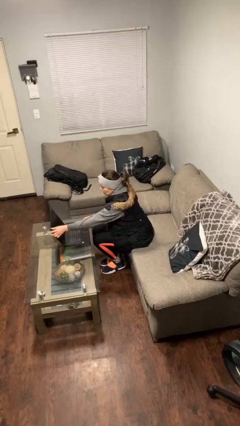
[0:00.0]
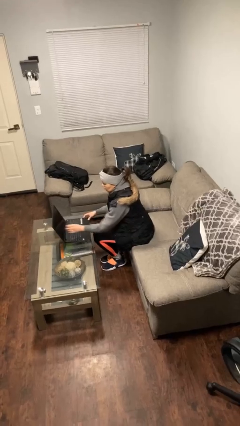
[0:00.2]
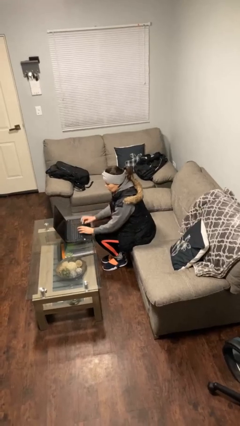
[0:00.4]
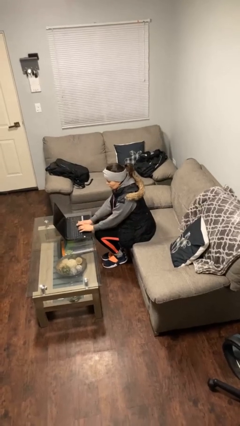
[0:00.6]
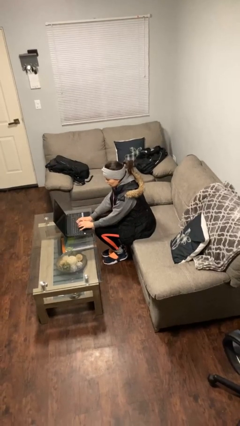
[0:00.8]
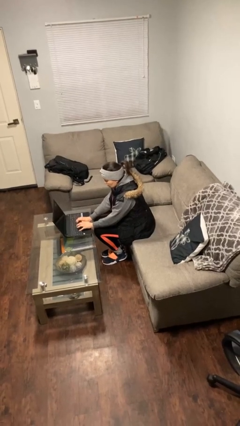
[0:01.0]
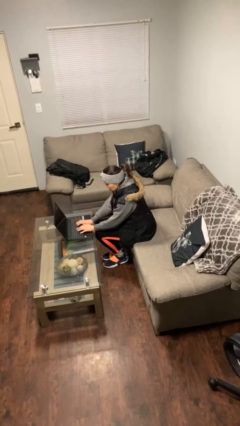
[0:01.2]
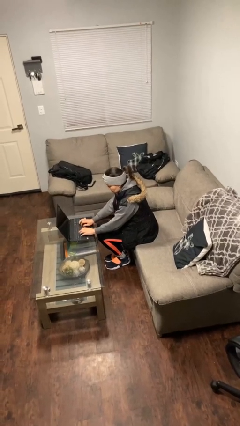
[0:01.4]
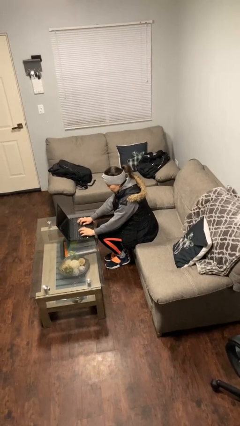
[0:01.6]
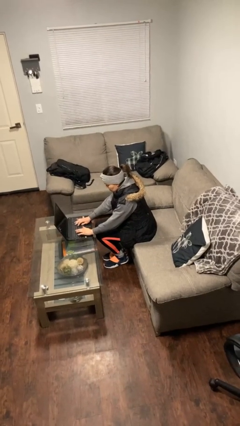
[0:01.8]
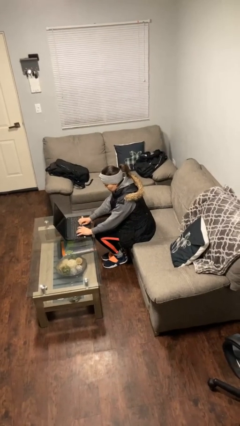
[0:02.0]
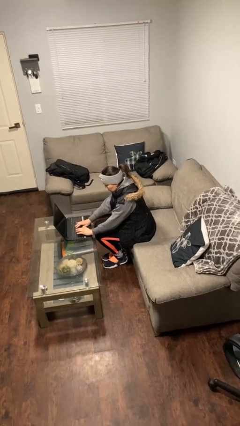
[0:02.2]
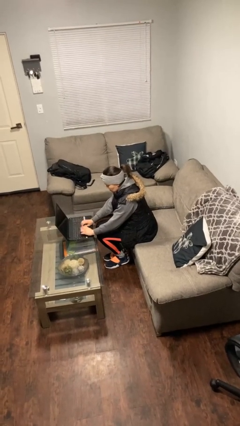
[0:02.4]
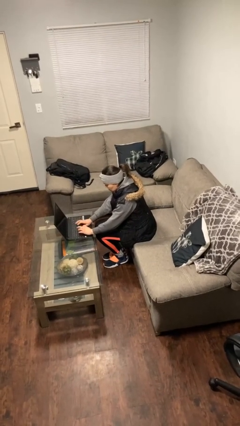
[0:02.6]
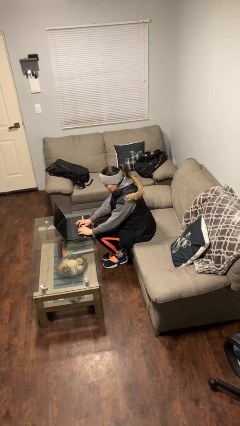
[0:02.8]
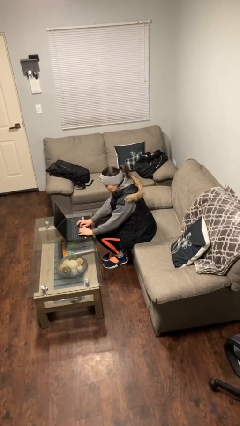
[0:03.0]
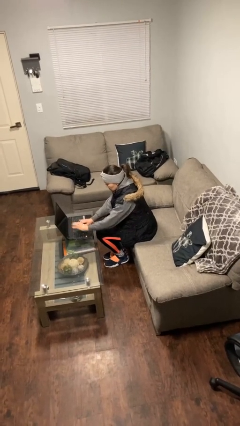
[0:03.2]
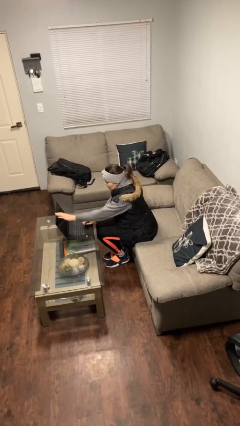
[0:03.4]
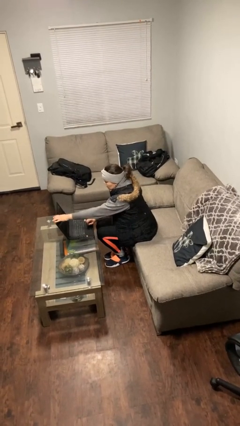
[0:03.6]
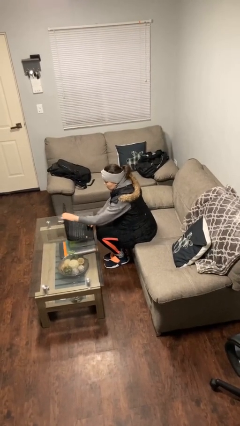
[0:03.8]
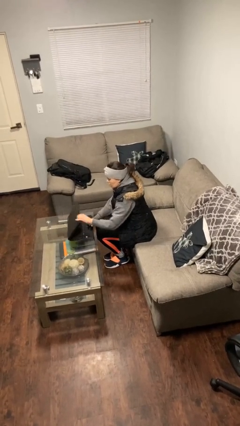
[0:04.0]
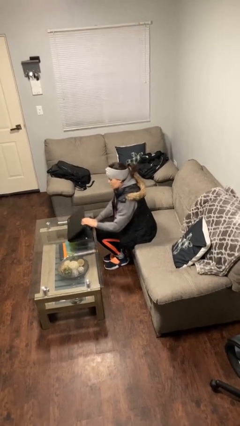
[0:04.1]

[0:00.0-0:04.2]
person interacts with laptop

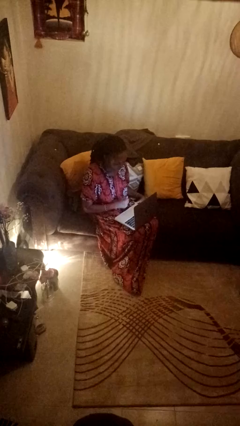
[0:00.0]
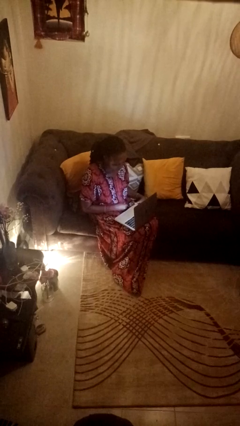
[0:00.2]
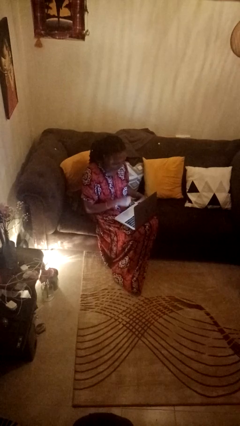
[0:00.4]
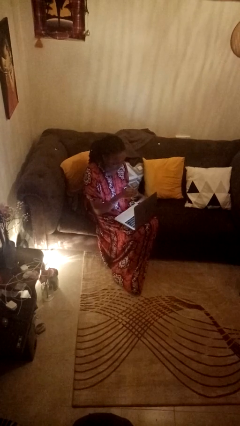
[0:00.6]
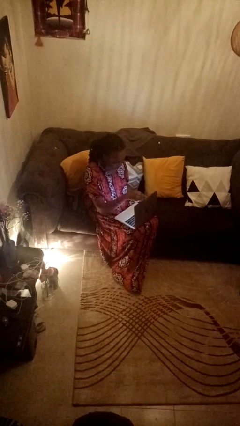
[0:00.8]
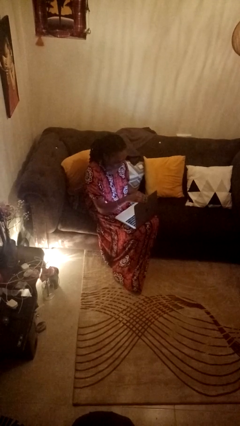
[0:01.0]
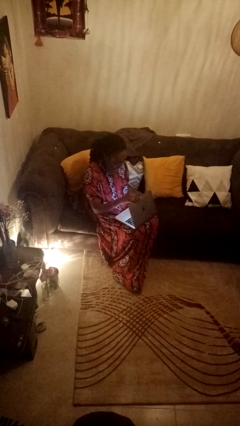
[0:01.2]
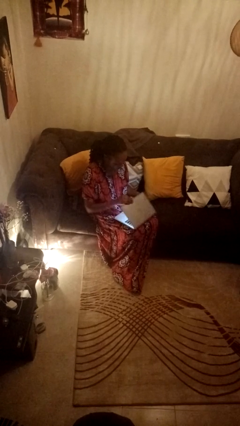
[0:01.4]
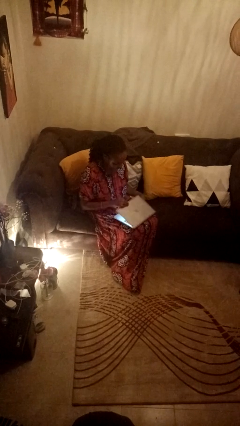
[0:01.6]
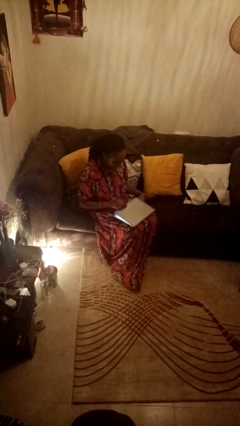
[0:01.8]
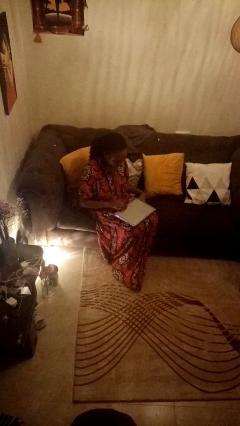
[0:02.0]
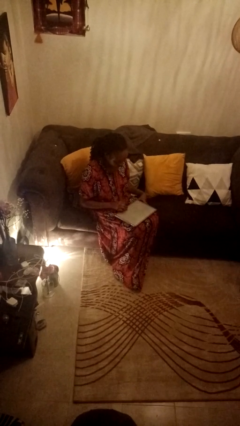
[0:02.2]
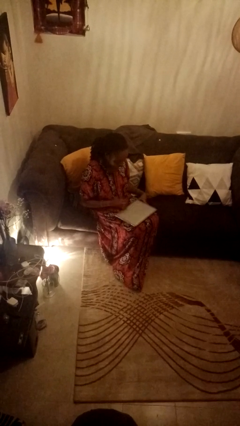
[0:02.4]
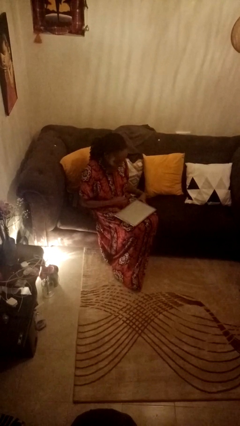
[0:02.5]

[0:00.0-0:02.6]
person closes laptop

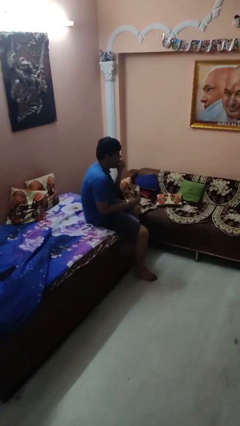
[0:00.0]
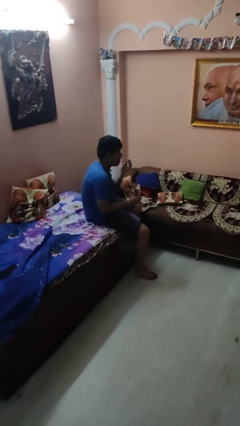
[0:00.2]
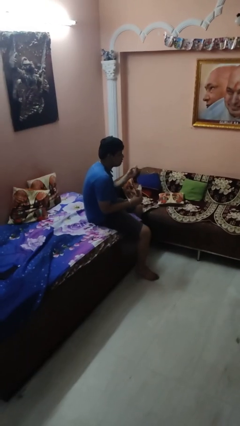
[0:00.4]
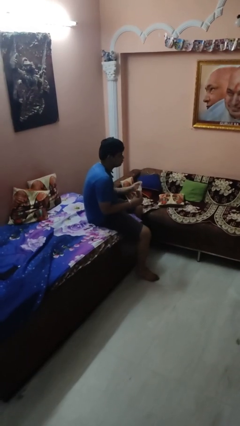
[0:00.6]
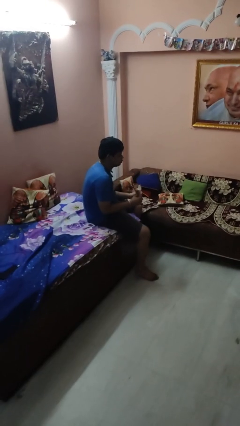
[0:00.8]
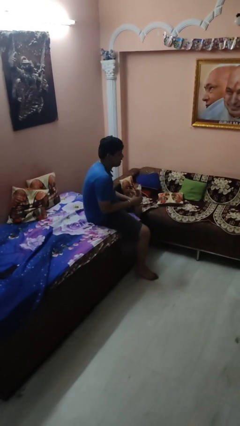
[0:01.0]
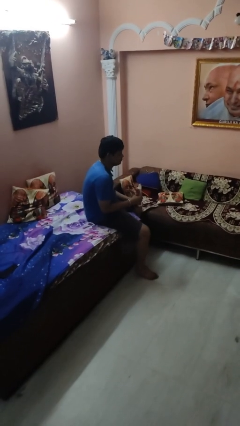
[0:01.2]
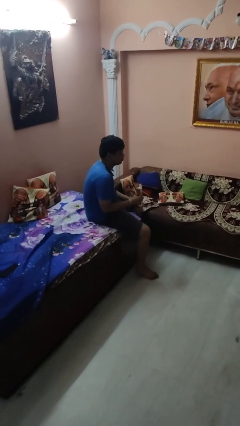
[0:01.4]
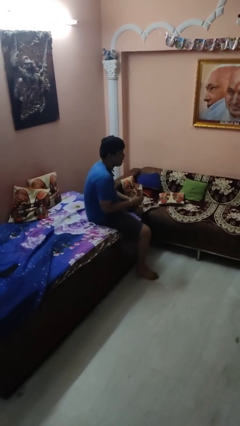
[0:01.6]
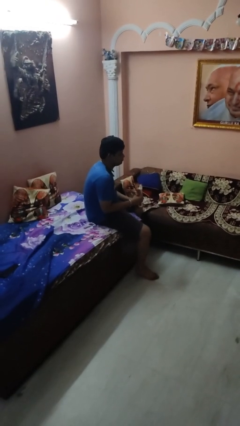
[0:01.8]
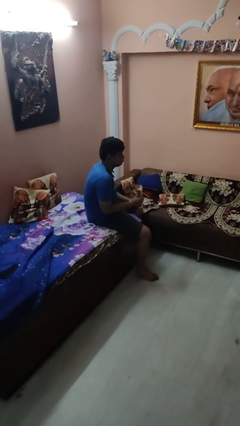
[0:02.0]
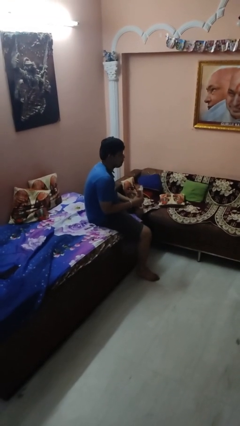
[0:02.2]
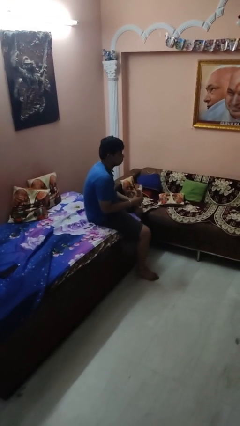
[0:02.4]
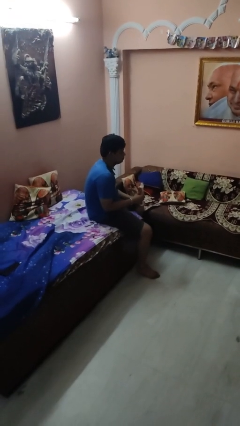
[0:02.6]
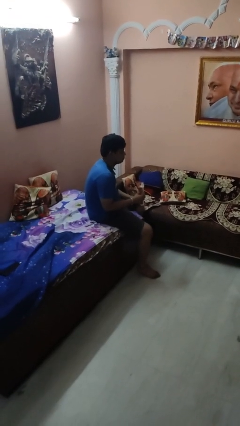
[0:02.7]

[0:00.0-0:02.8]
person eats snack from bag

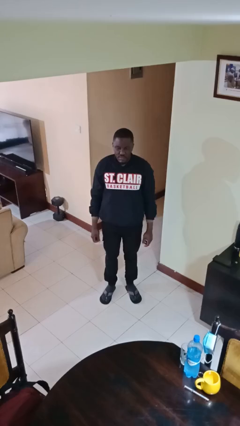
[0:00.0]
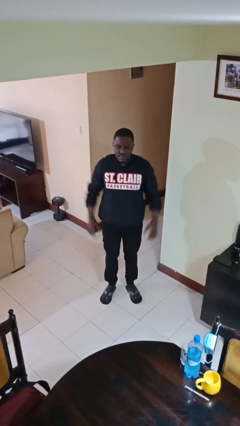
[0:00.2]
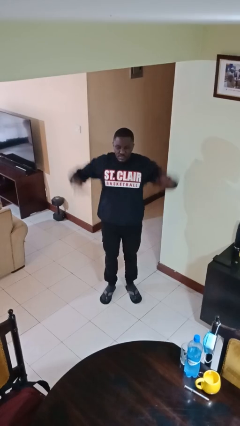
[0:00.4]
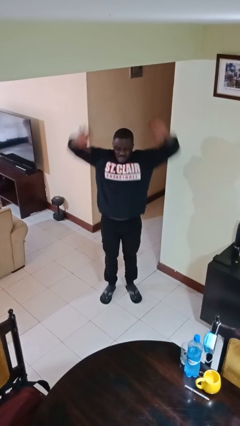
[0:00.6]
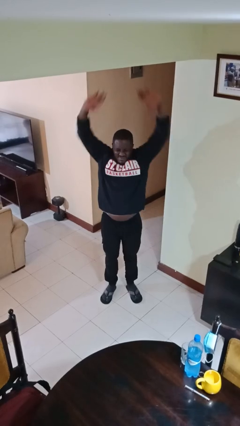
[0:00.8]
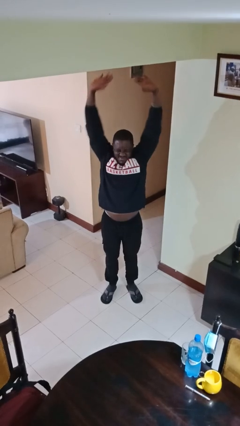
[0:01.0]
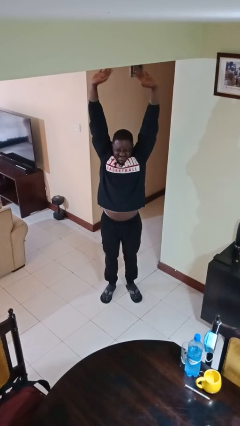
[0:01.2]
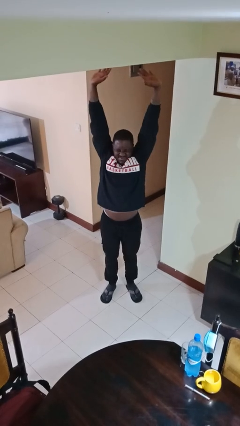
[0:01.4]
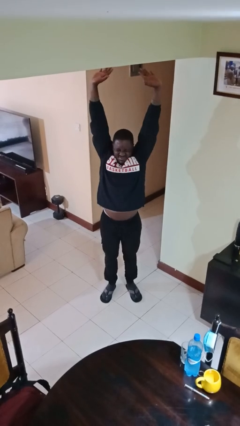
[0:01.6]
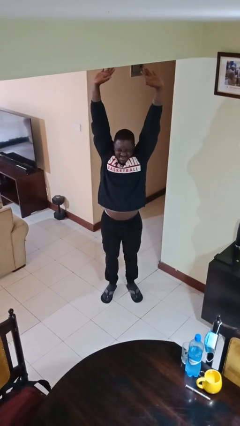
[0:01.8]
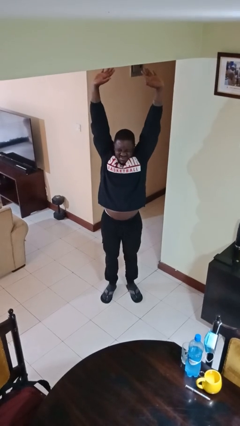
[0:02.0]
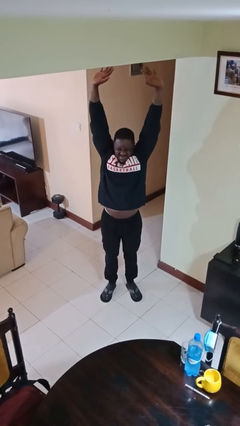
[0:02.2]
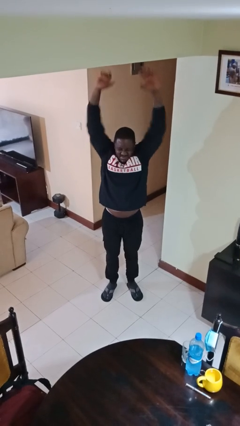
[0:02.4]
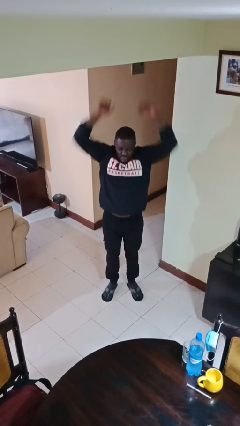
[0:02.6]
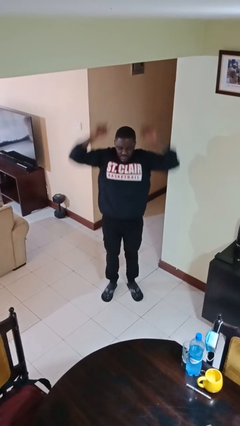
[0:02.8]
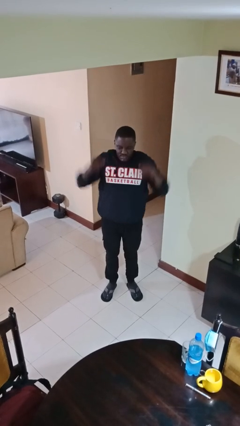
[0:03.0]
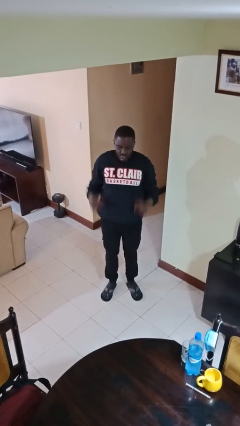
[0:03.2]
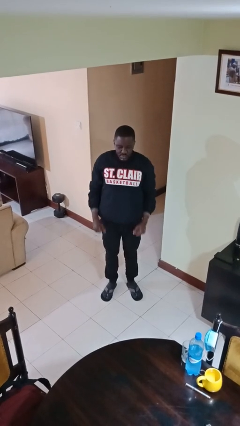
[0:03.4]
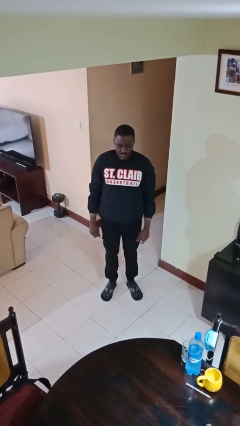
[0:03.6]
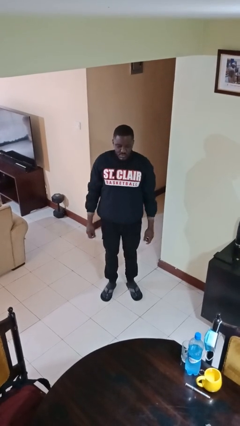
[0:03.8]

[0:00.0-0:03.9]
person stretches arms over head

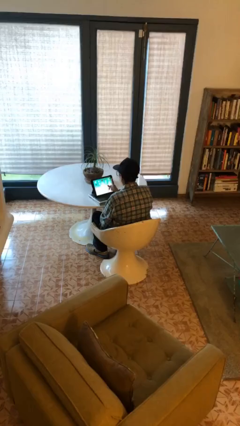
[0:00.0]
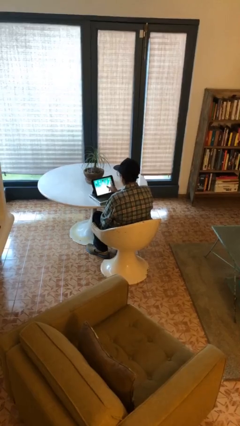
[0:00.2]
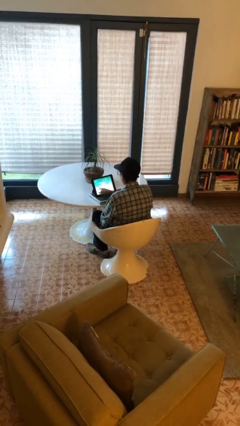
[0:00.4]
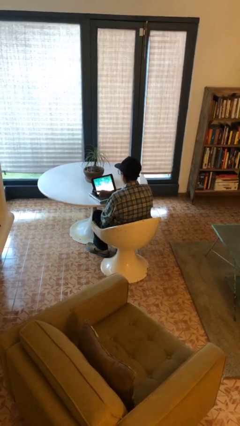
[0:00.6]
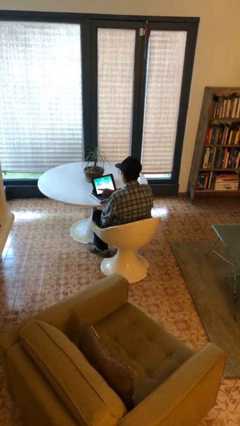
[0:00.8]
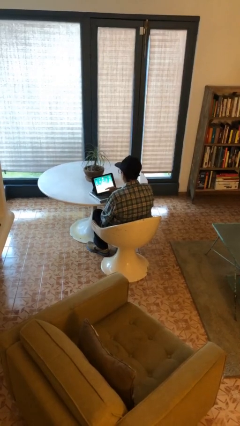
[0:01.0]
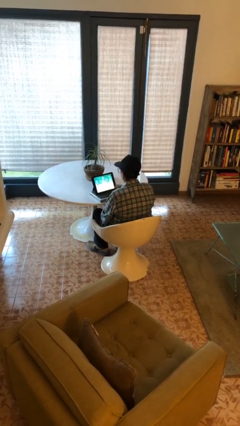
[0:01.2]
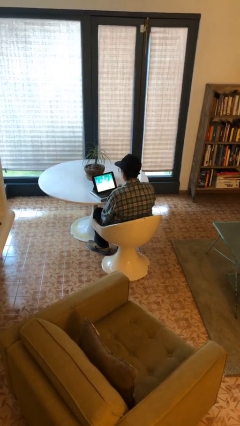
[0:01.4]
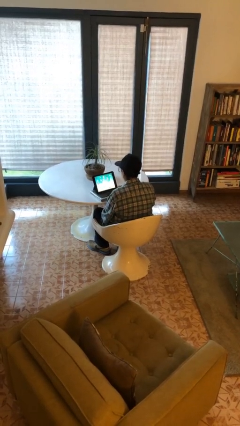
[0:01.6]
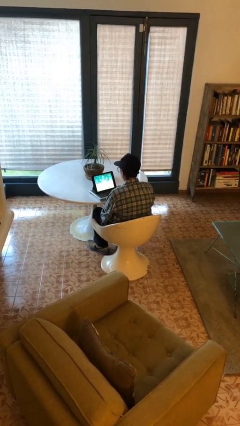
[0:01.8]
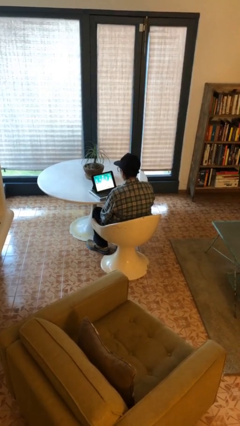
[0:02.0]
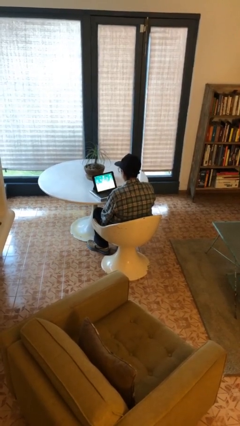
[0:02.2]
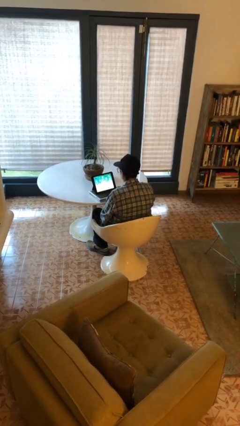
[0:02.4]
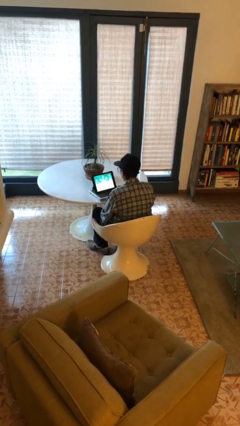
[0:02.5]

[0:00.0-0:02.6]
person interacts with tablet

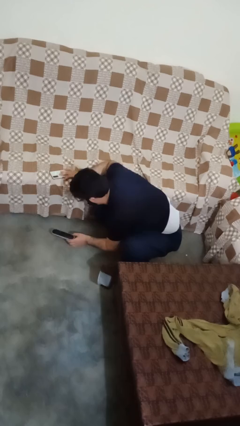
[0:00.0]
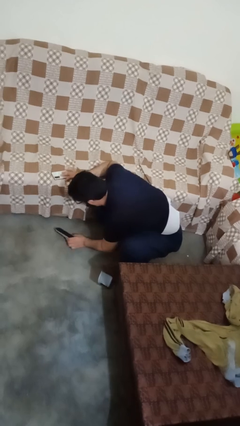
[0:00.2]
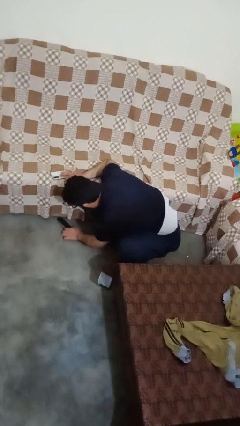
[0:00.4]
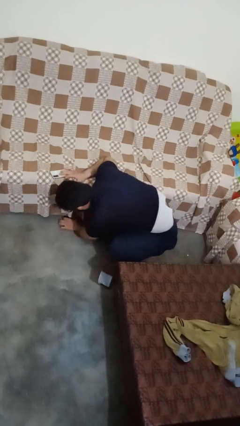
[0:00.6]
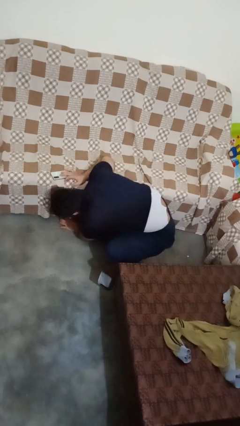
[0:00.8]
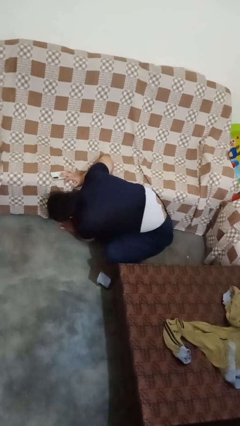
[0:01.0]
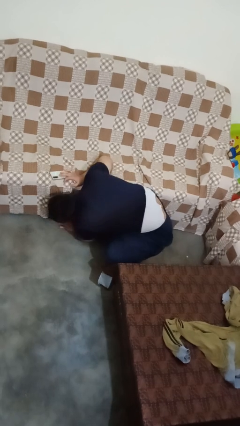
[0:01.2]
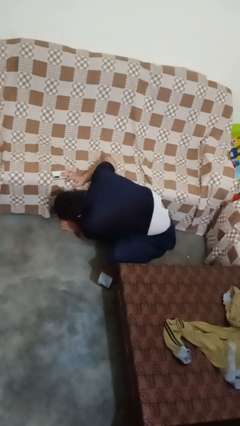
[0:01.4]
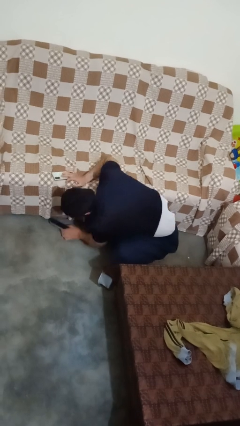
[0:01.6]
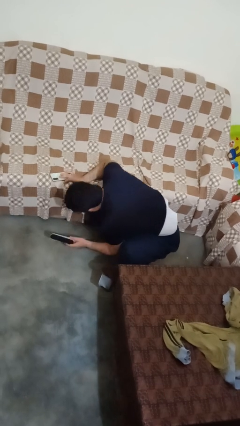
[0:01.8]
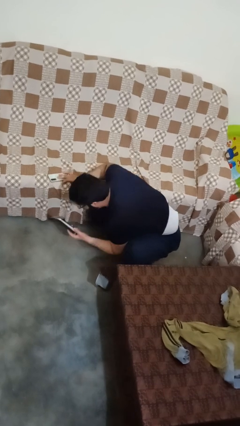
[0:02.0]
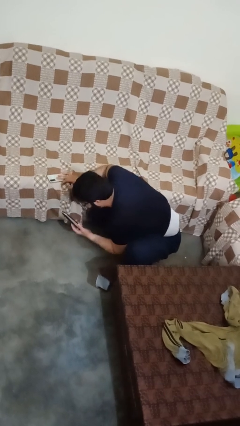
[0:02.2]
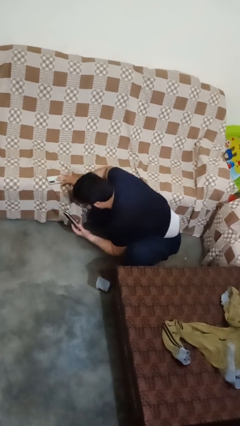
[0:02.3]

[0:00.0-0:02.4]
person searches under couch
